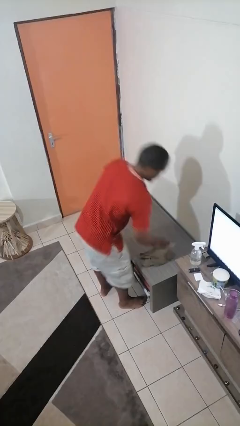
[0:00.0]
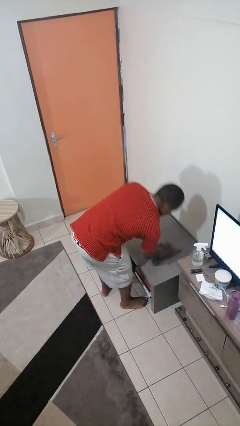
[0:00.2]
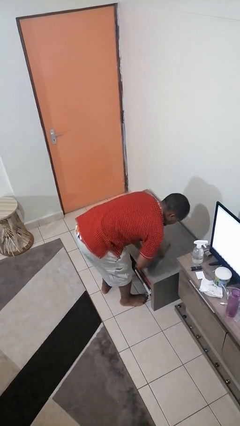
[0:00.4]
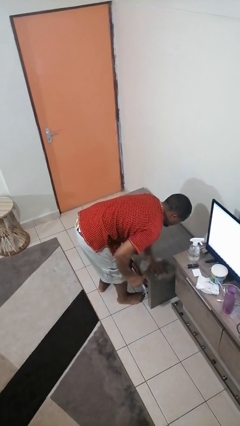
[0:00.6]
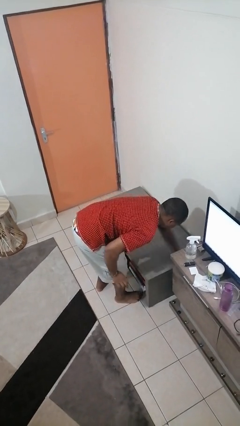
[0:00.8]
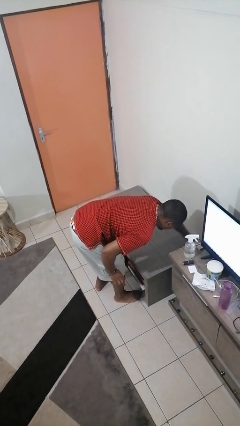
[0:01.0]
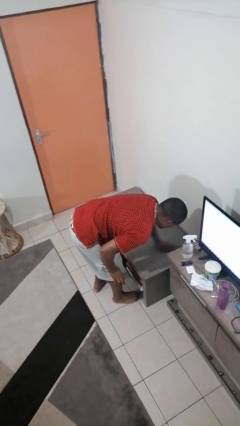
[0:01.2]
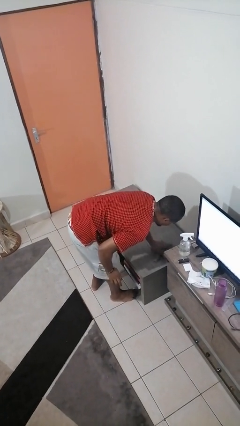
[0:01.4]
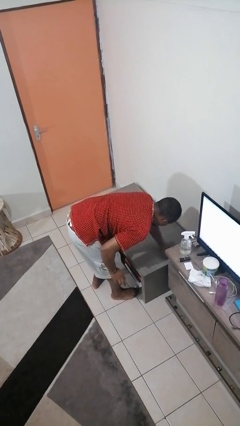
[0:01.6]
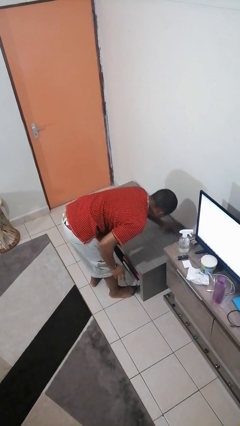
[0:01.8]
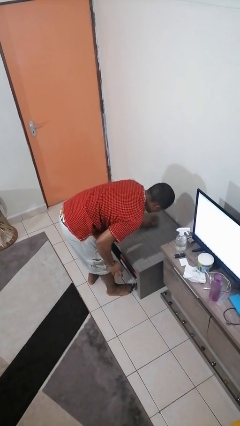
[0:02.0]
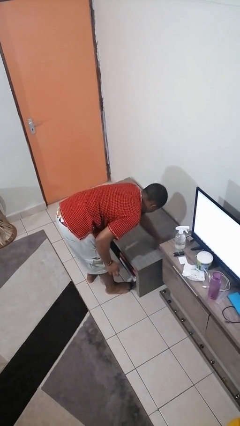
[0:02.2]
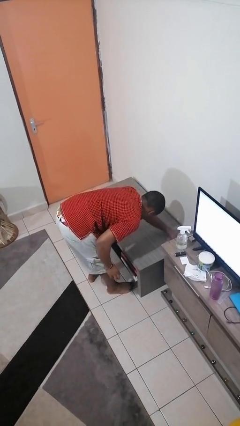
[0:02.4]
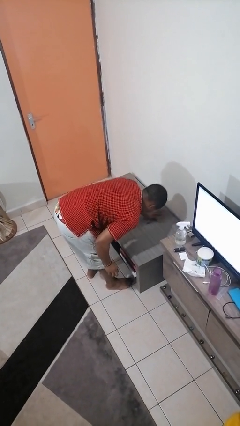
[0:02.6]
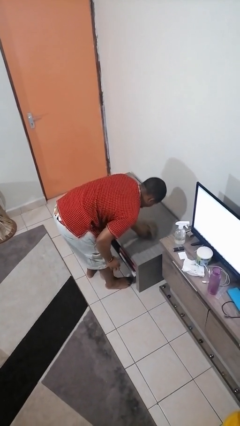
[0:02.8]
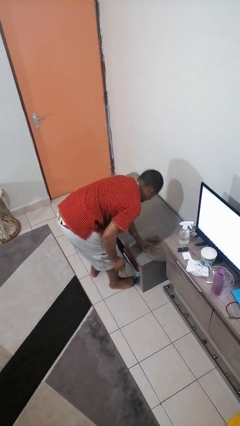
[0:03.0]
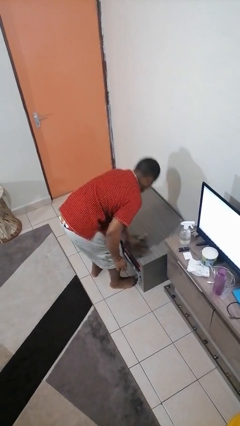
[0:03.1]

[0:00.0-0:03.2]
person cleans table with rag

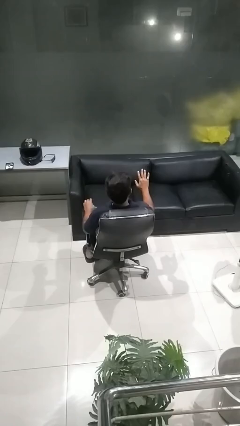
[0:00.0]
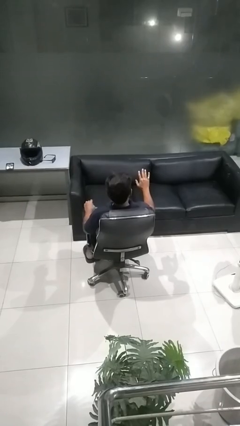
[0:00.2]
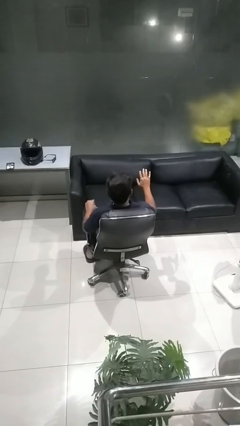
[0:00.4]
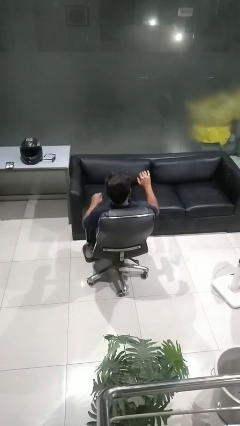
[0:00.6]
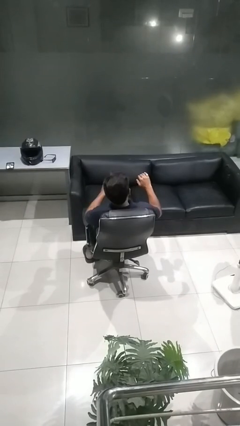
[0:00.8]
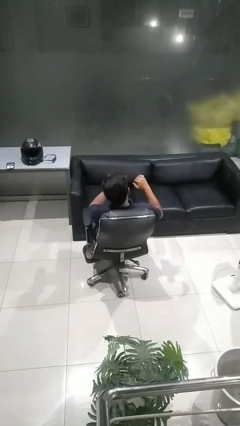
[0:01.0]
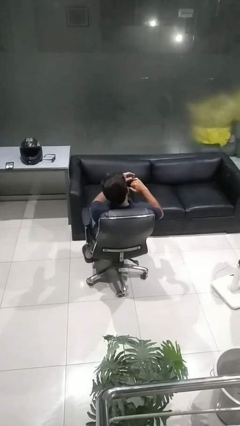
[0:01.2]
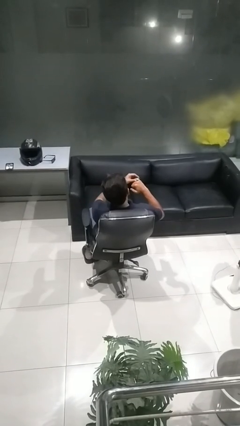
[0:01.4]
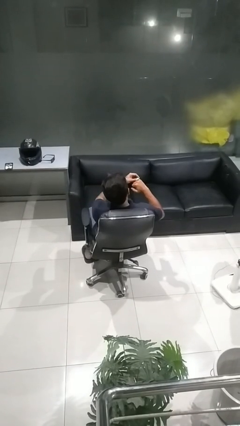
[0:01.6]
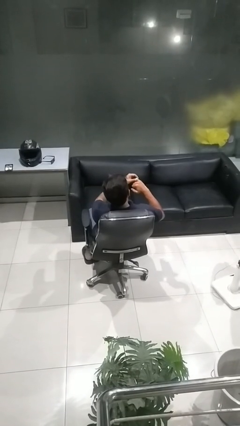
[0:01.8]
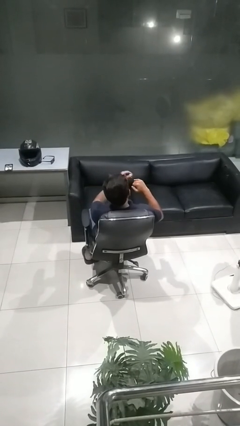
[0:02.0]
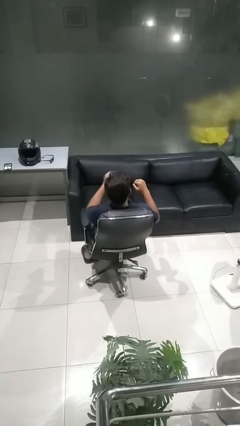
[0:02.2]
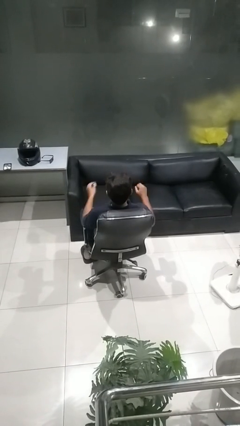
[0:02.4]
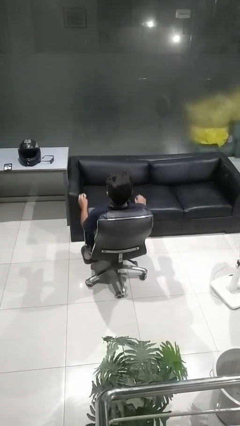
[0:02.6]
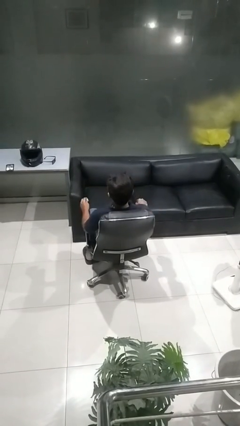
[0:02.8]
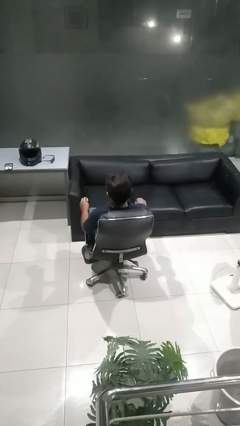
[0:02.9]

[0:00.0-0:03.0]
person takes off ring

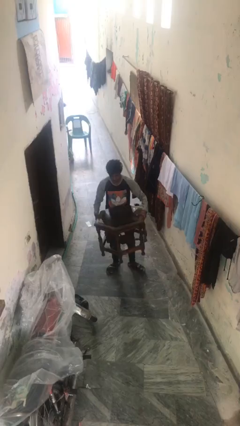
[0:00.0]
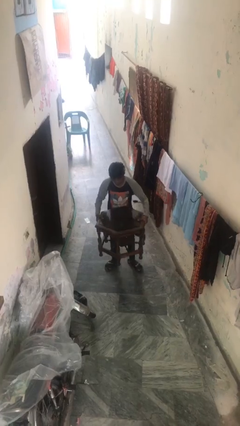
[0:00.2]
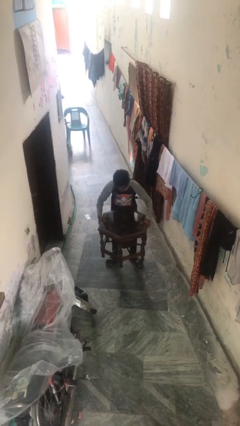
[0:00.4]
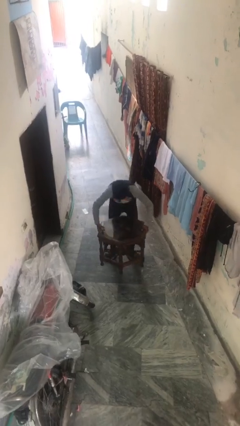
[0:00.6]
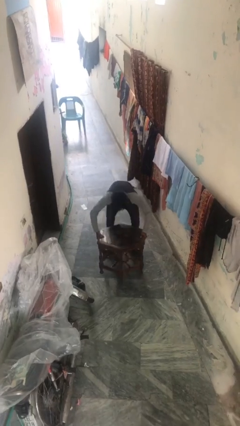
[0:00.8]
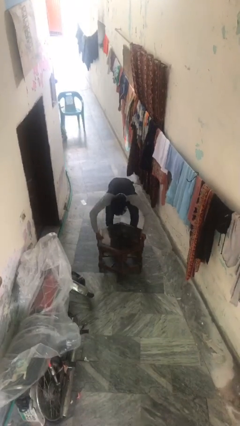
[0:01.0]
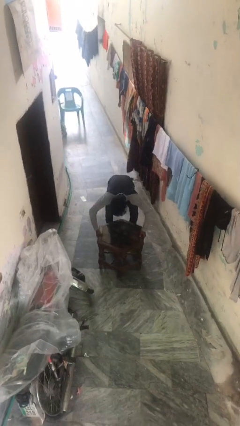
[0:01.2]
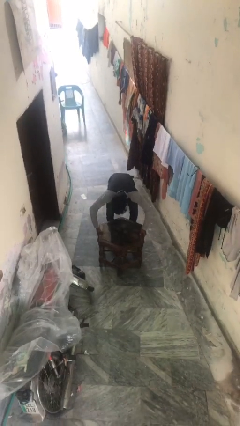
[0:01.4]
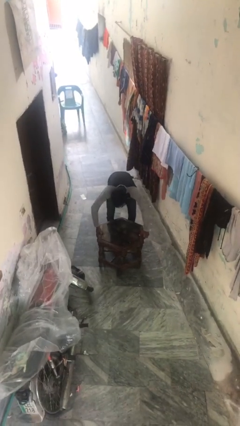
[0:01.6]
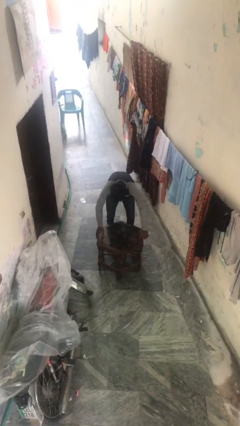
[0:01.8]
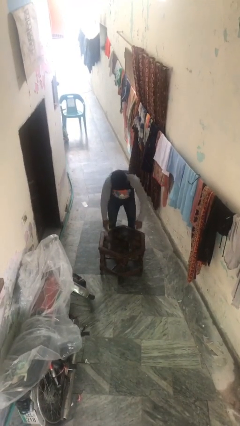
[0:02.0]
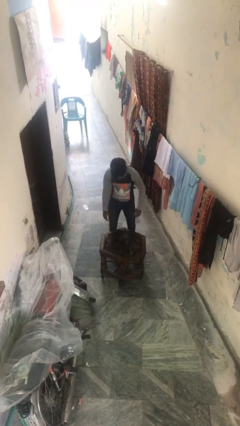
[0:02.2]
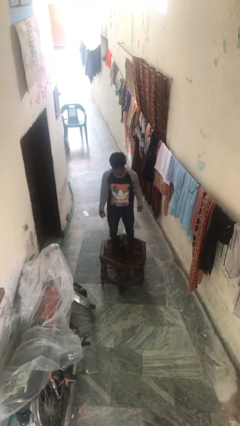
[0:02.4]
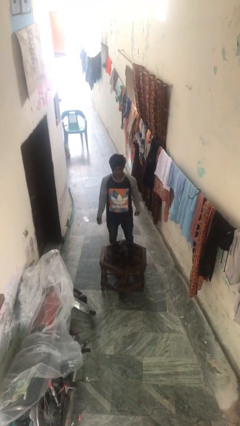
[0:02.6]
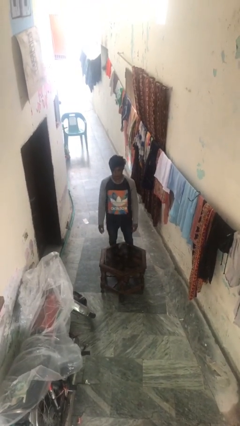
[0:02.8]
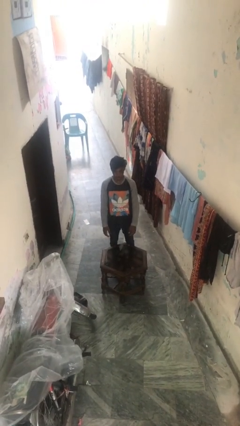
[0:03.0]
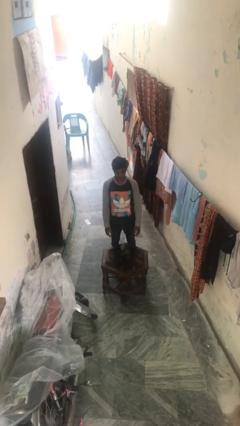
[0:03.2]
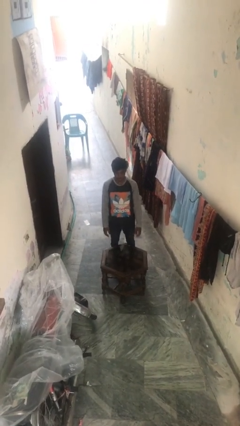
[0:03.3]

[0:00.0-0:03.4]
person puts down object on floor

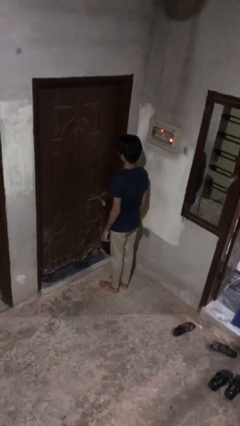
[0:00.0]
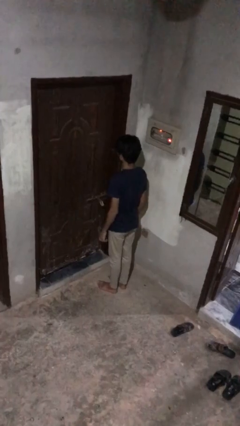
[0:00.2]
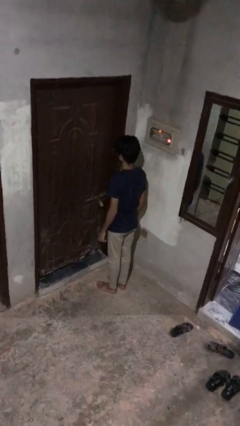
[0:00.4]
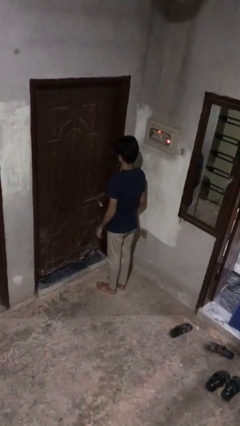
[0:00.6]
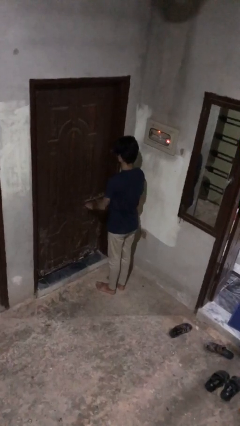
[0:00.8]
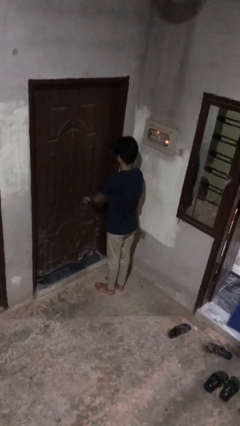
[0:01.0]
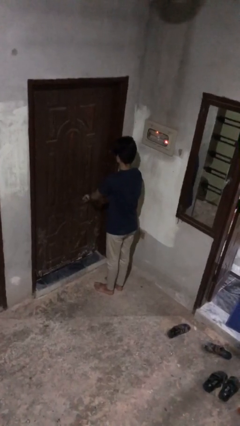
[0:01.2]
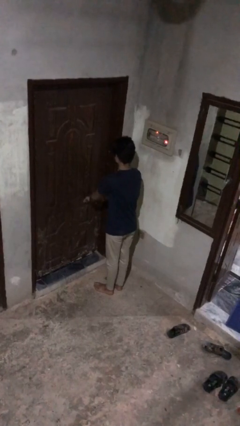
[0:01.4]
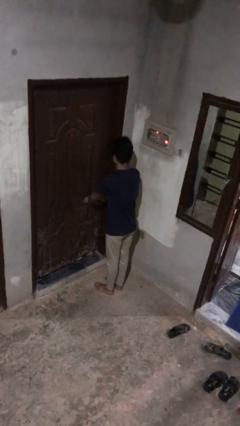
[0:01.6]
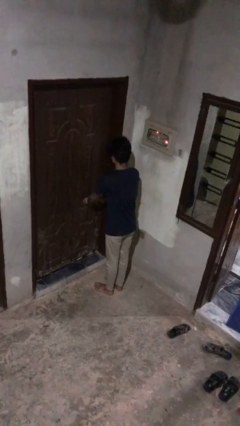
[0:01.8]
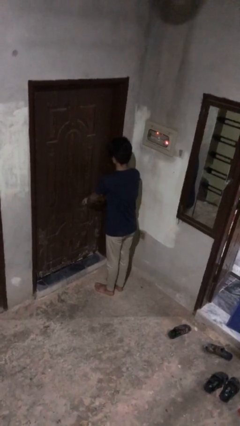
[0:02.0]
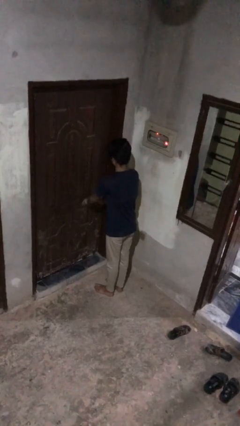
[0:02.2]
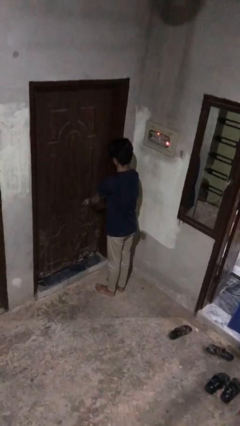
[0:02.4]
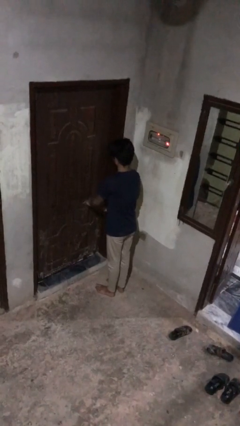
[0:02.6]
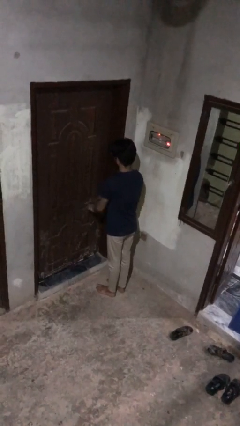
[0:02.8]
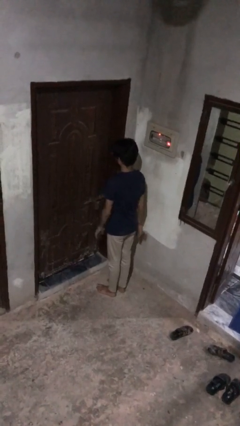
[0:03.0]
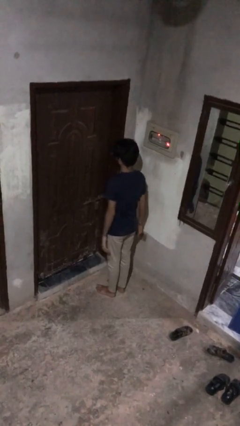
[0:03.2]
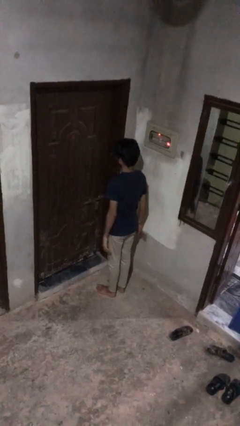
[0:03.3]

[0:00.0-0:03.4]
person unlocks door with keys

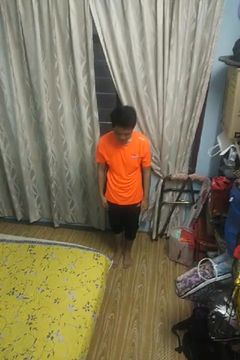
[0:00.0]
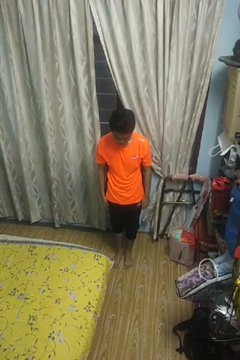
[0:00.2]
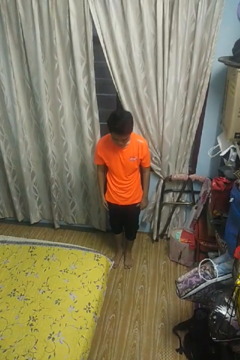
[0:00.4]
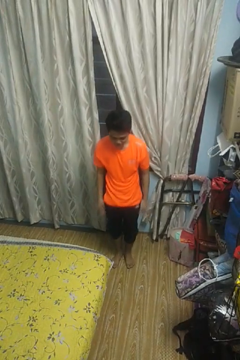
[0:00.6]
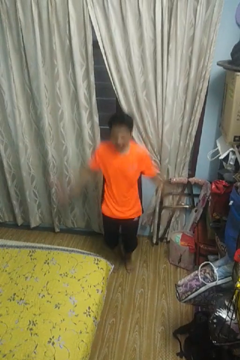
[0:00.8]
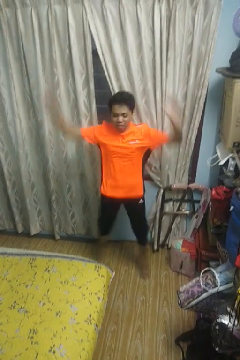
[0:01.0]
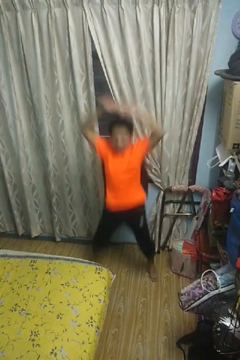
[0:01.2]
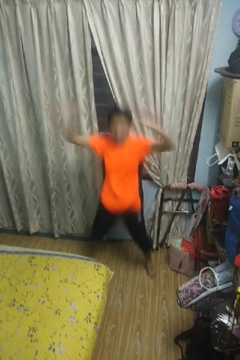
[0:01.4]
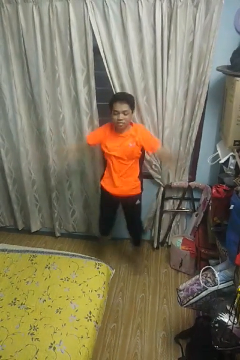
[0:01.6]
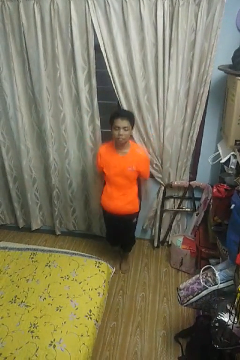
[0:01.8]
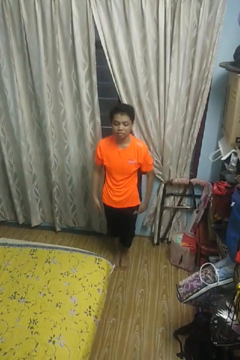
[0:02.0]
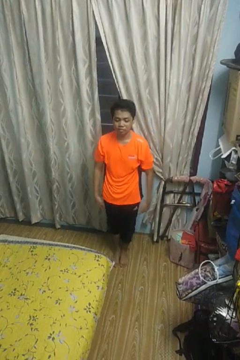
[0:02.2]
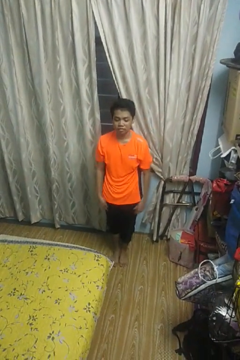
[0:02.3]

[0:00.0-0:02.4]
person exercises with jumping jacks

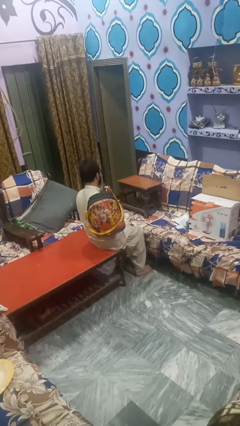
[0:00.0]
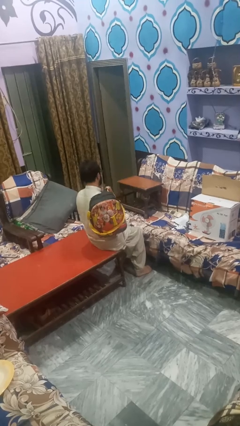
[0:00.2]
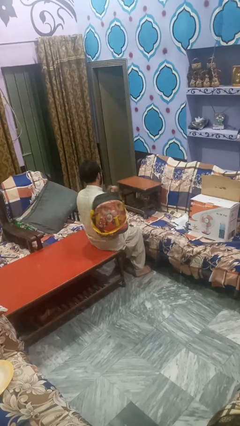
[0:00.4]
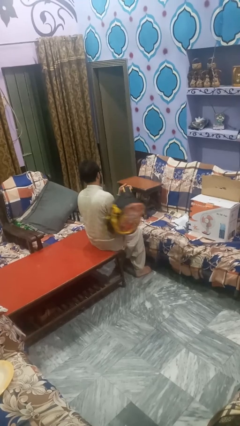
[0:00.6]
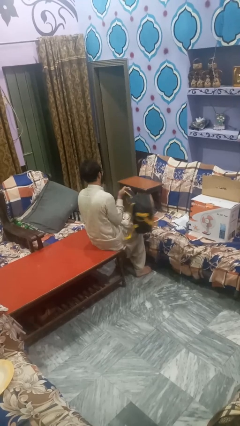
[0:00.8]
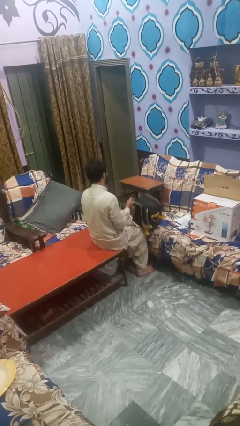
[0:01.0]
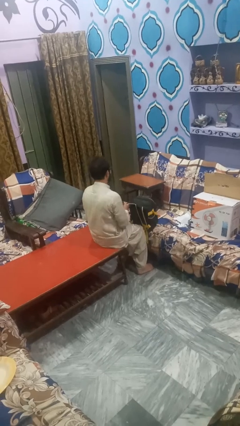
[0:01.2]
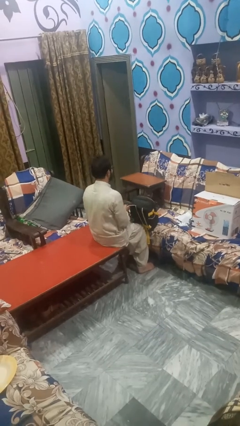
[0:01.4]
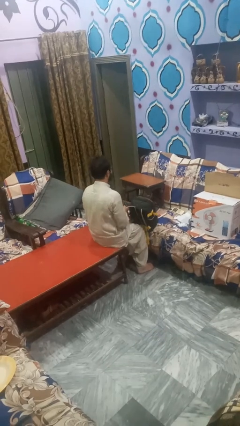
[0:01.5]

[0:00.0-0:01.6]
person takes off backpack

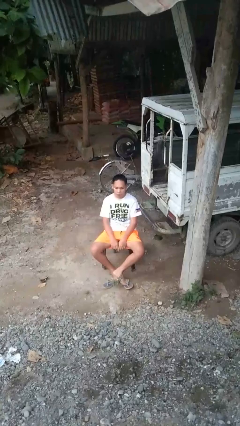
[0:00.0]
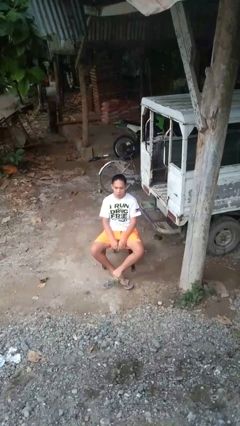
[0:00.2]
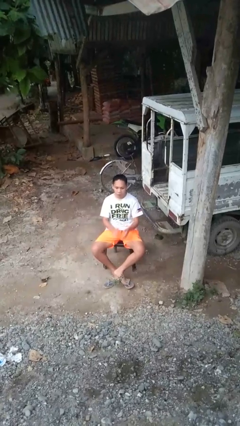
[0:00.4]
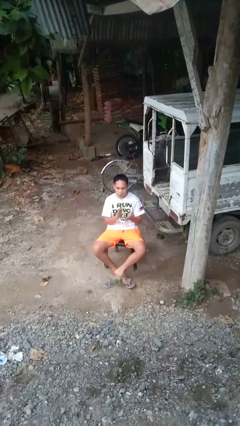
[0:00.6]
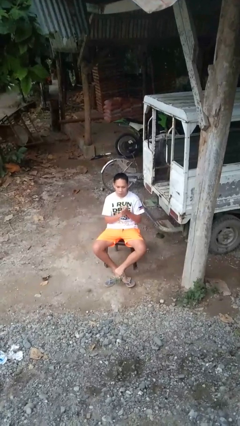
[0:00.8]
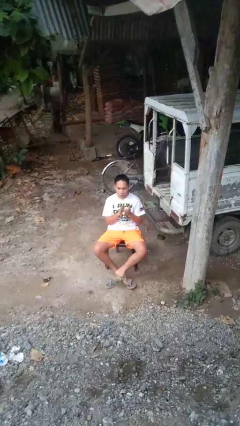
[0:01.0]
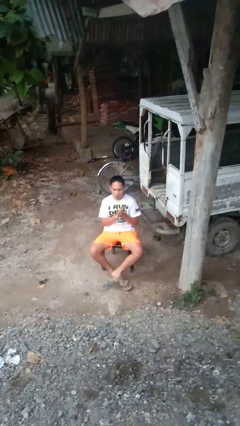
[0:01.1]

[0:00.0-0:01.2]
person claps hands
